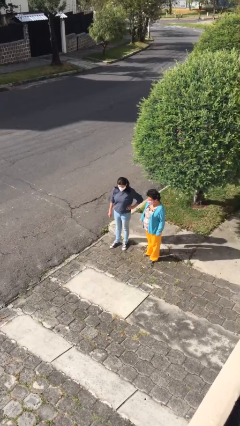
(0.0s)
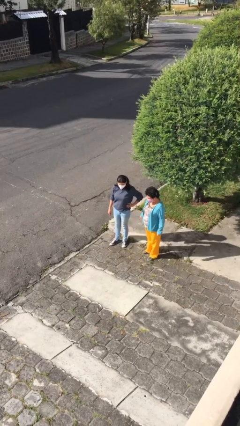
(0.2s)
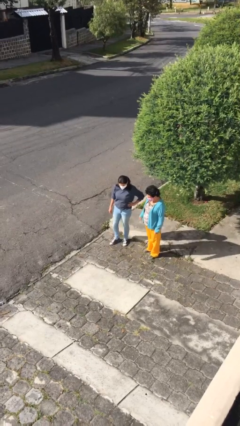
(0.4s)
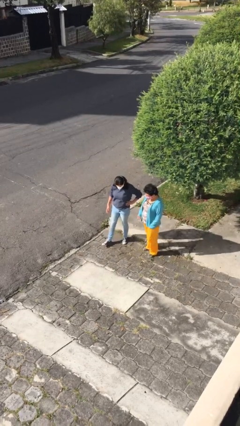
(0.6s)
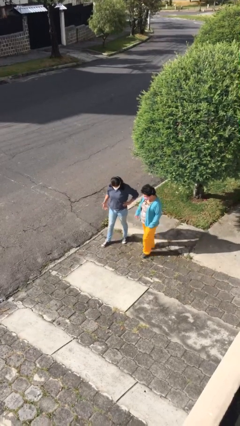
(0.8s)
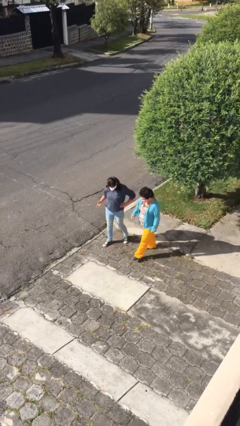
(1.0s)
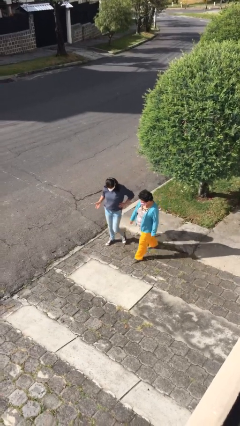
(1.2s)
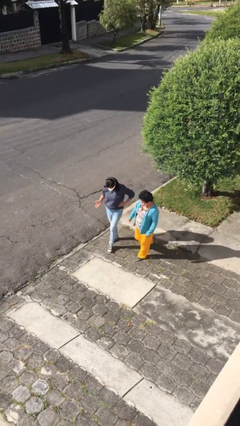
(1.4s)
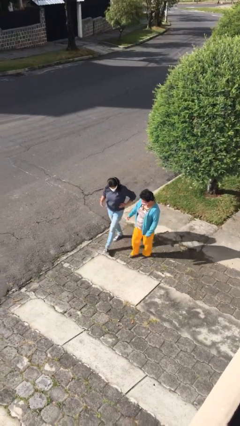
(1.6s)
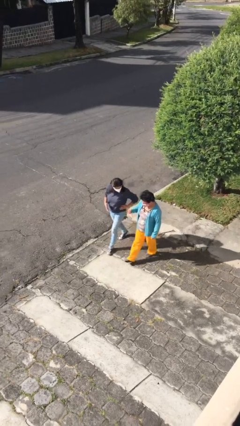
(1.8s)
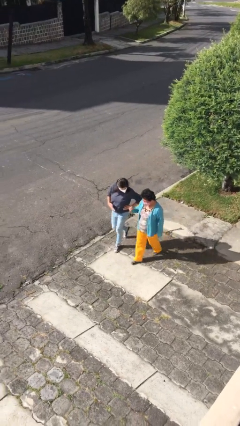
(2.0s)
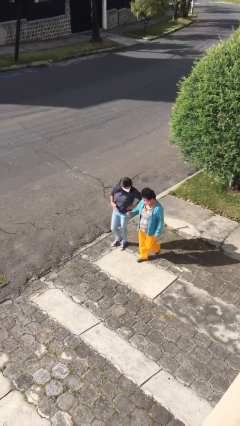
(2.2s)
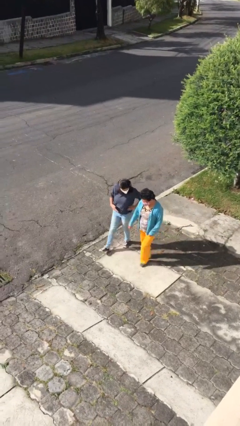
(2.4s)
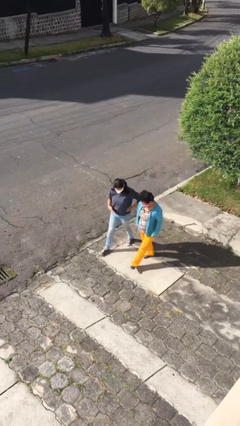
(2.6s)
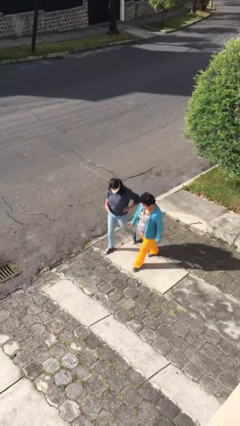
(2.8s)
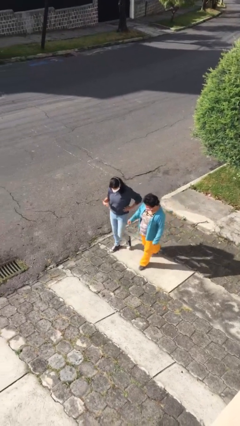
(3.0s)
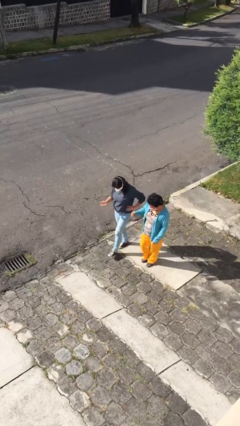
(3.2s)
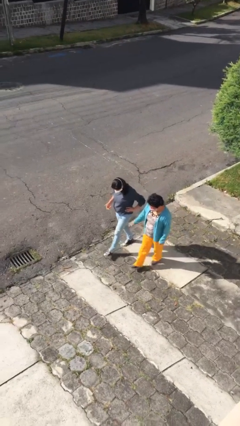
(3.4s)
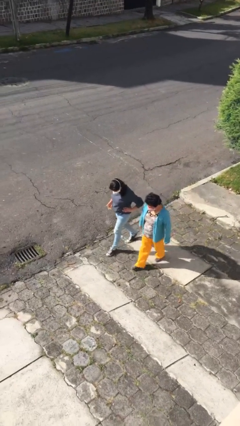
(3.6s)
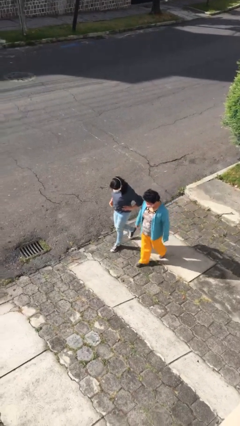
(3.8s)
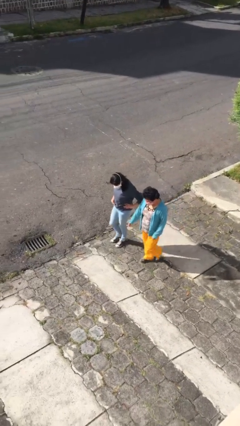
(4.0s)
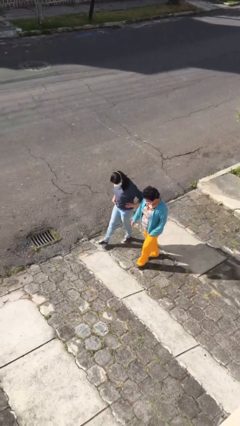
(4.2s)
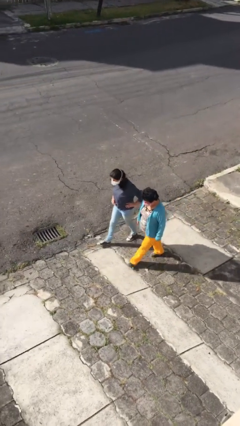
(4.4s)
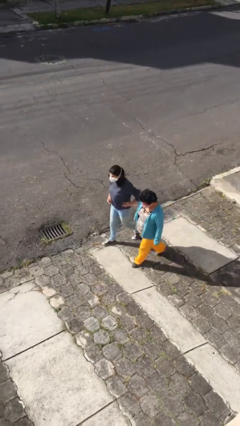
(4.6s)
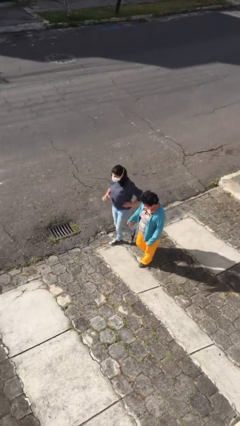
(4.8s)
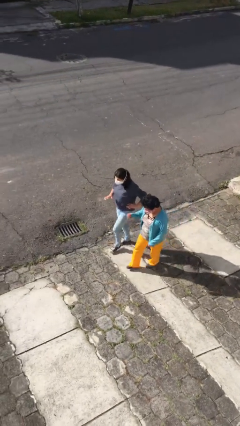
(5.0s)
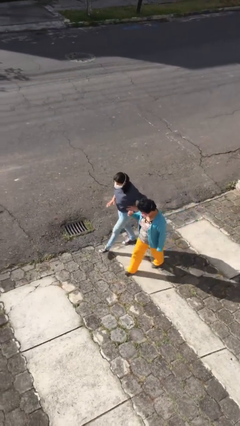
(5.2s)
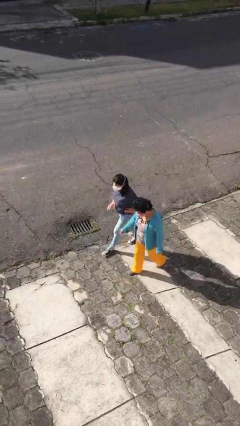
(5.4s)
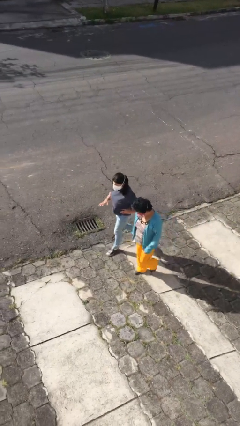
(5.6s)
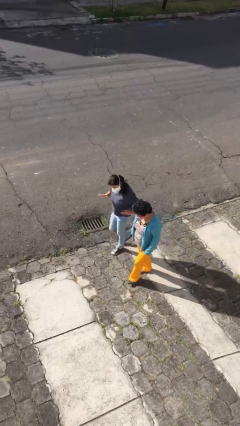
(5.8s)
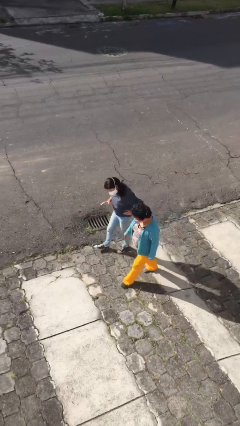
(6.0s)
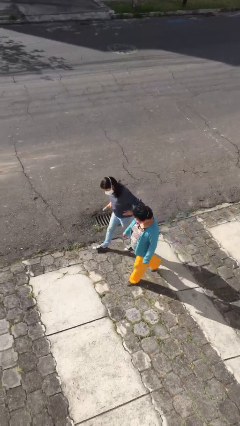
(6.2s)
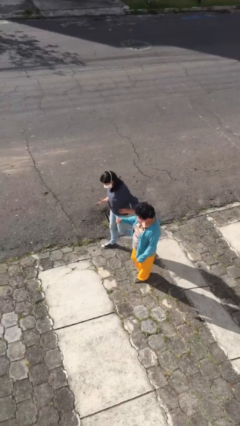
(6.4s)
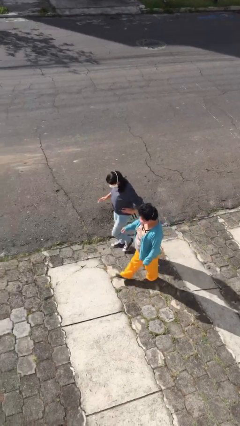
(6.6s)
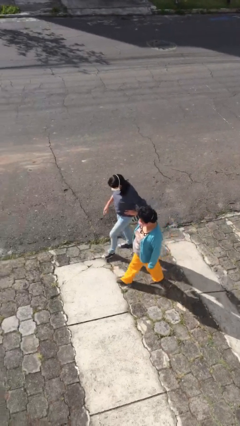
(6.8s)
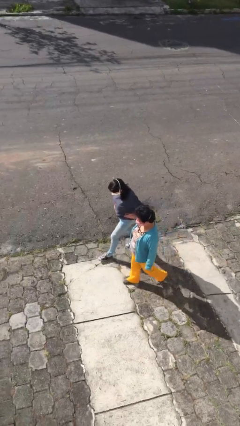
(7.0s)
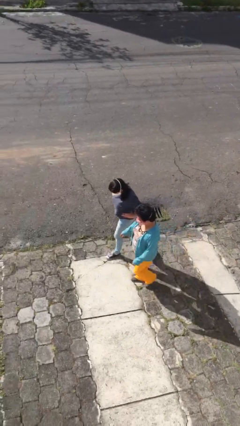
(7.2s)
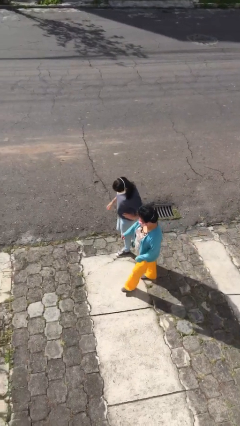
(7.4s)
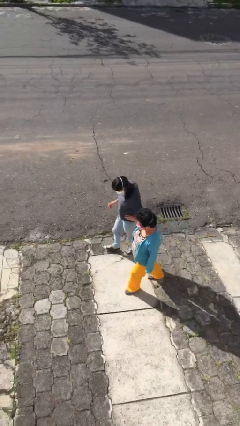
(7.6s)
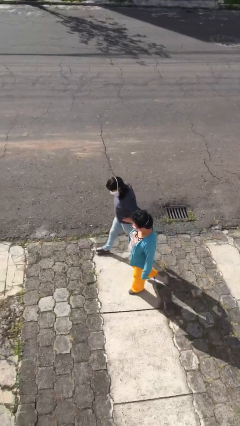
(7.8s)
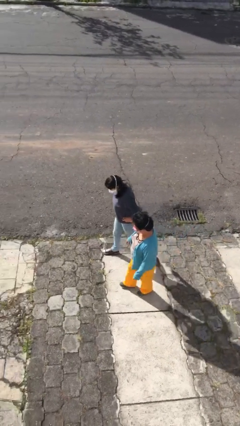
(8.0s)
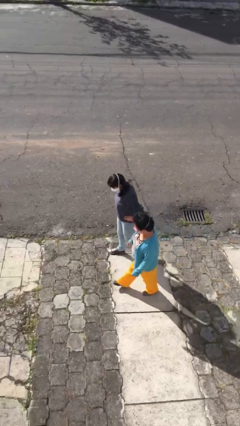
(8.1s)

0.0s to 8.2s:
person talks to person

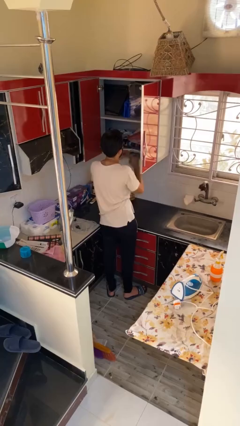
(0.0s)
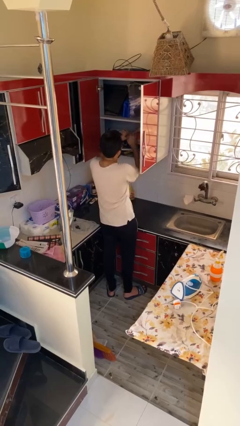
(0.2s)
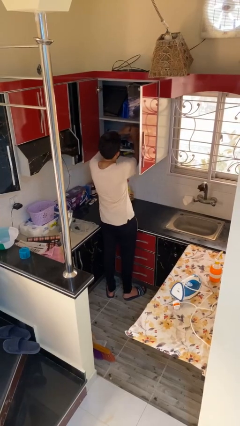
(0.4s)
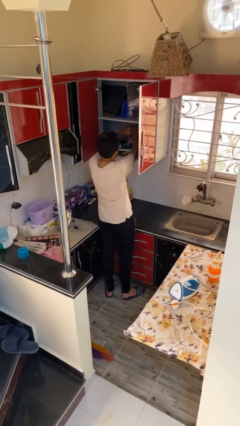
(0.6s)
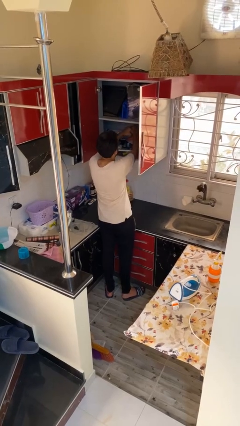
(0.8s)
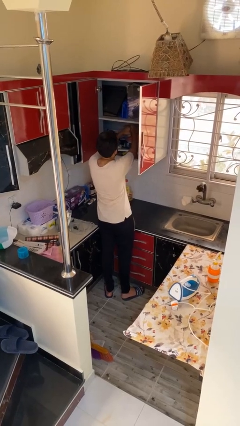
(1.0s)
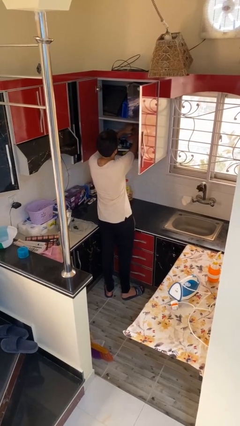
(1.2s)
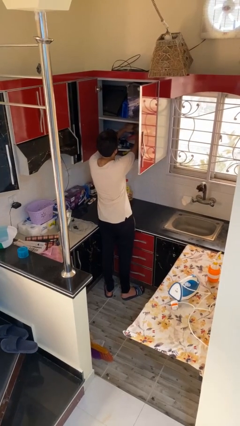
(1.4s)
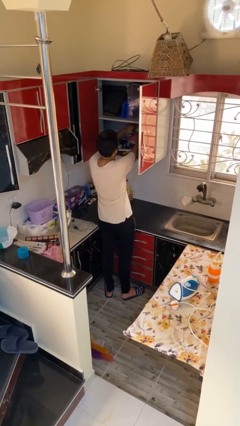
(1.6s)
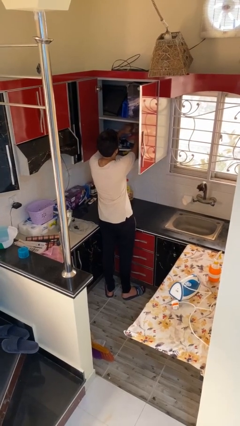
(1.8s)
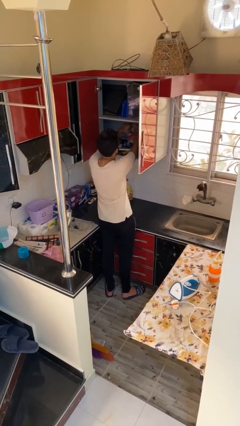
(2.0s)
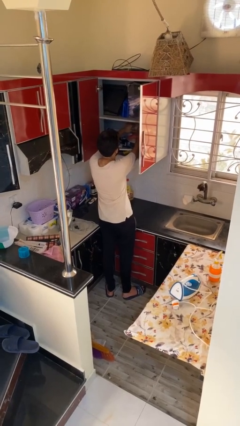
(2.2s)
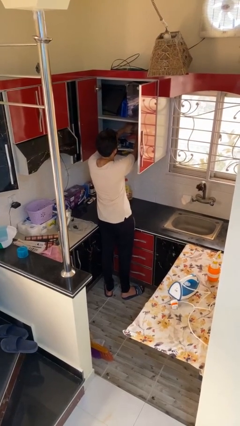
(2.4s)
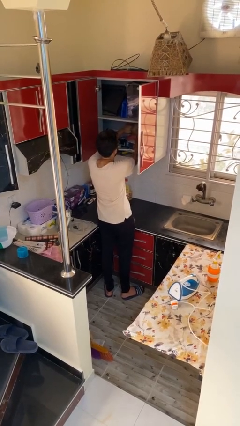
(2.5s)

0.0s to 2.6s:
person searches in cabinet

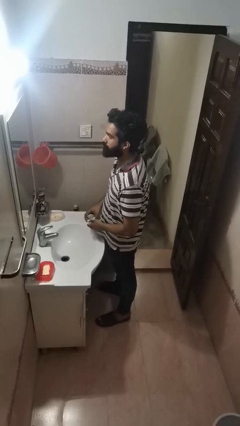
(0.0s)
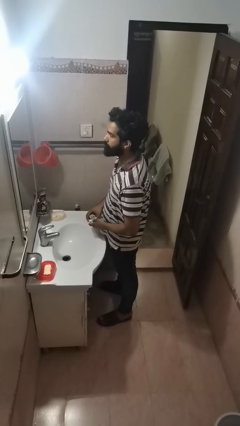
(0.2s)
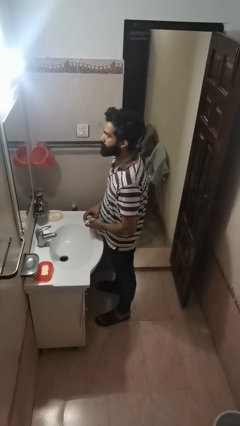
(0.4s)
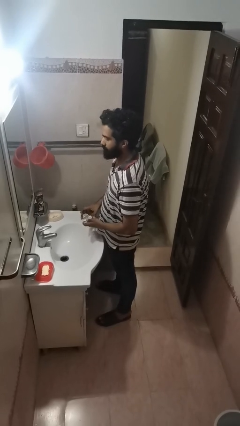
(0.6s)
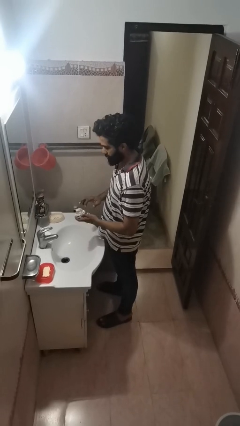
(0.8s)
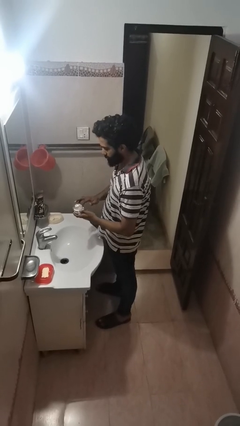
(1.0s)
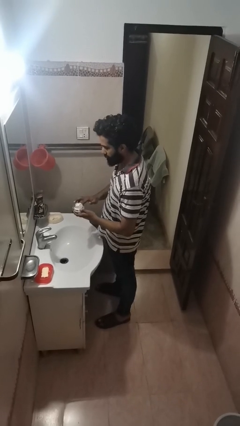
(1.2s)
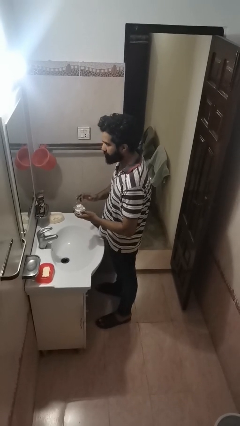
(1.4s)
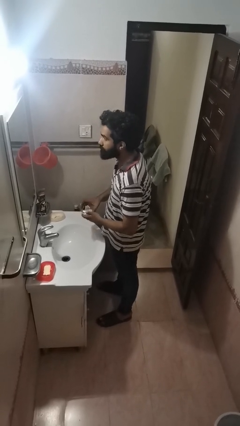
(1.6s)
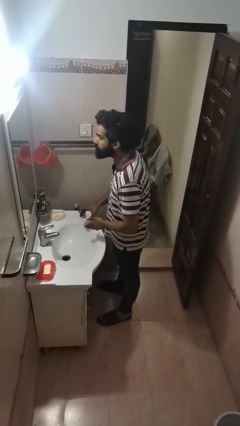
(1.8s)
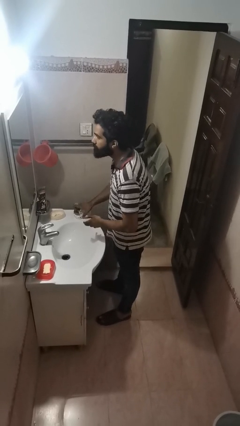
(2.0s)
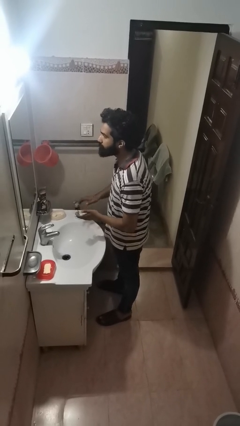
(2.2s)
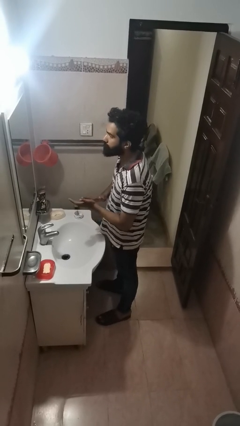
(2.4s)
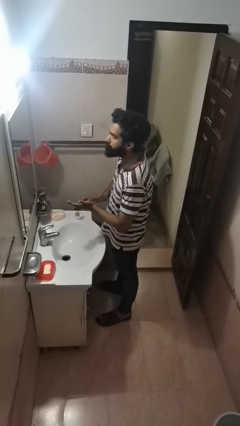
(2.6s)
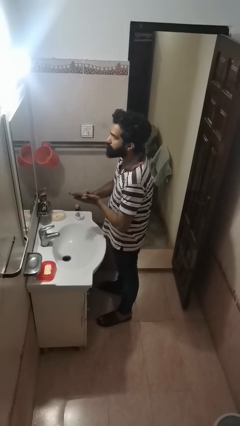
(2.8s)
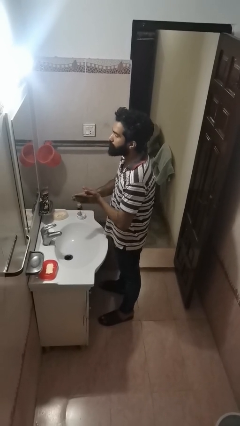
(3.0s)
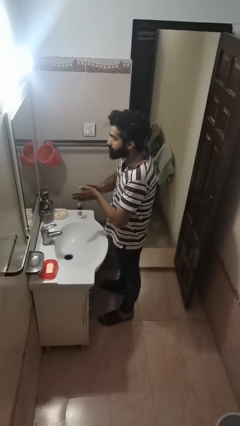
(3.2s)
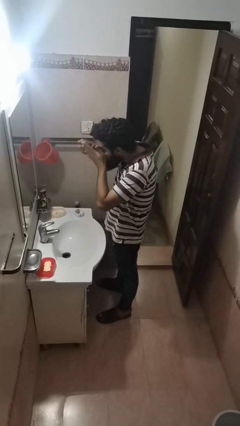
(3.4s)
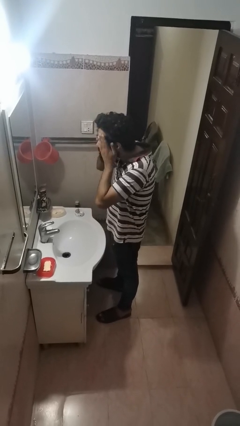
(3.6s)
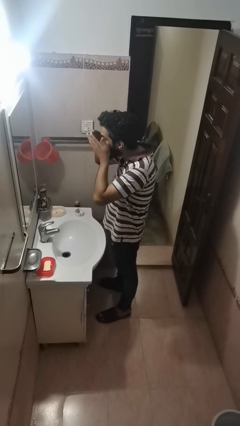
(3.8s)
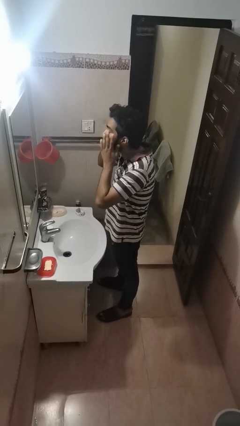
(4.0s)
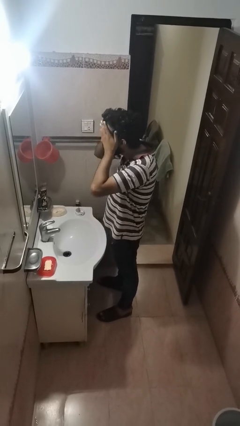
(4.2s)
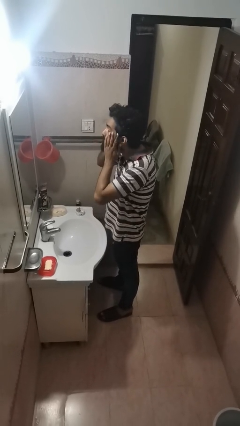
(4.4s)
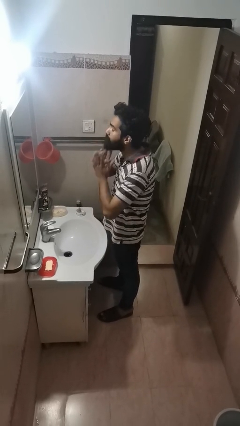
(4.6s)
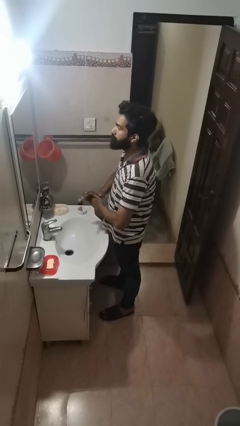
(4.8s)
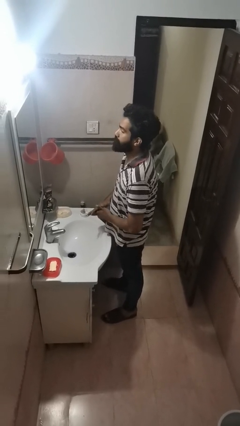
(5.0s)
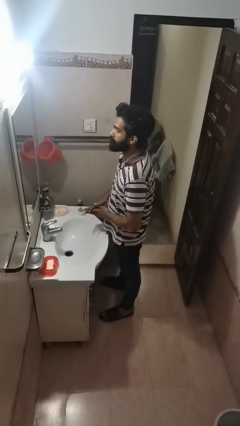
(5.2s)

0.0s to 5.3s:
person applies facial moisturizer

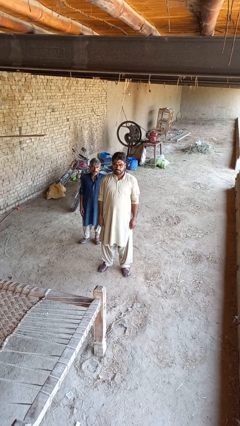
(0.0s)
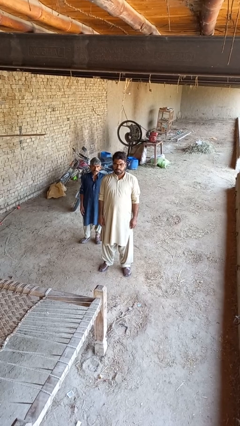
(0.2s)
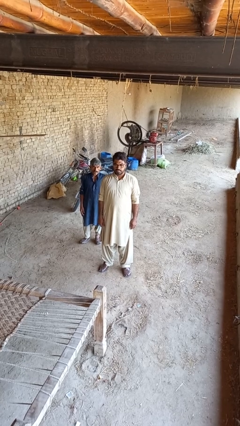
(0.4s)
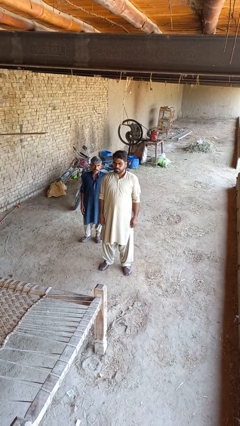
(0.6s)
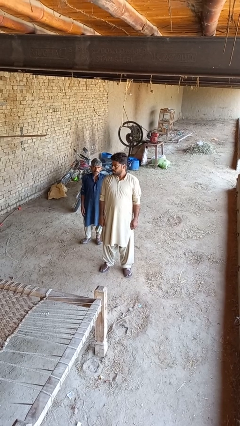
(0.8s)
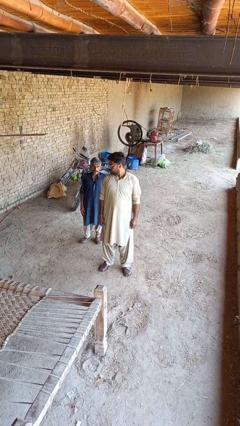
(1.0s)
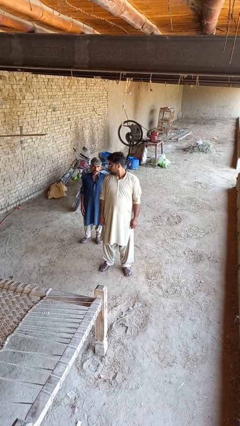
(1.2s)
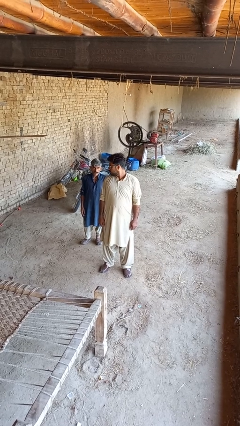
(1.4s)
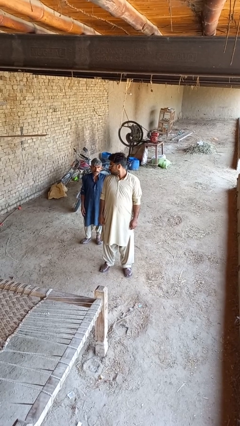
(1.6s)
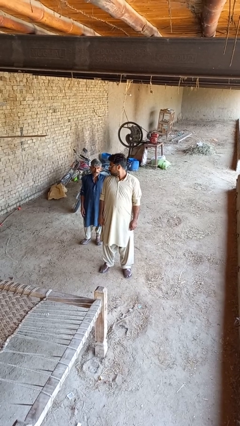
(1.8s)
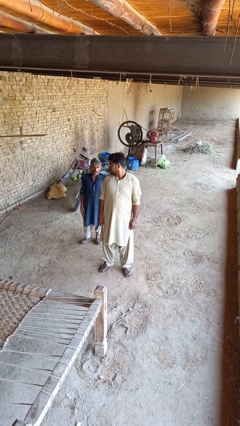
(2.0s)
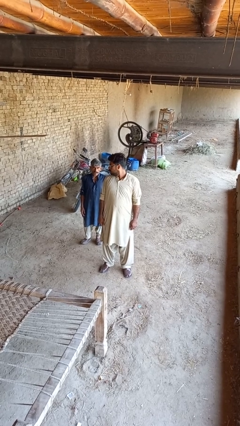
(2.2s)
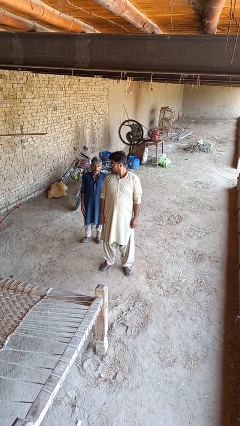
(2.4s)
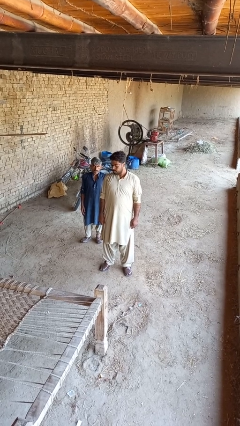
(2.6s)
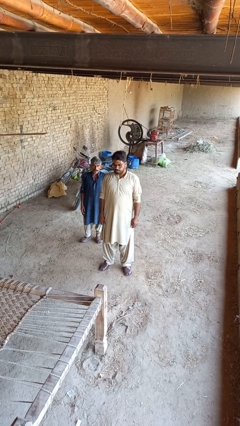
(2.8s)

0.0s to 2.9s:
person looks over shoulder
